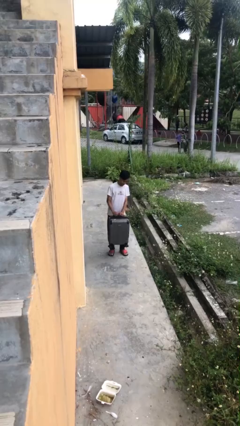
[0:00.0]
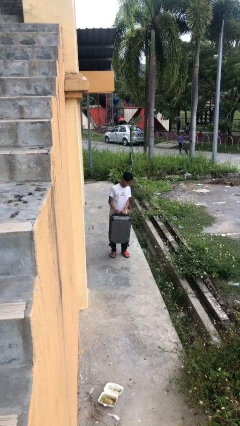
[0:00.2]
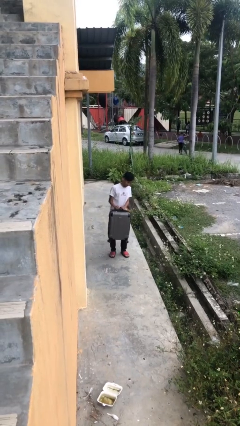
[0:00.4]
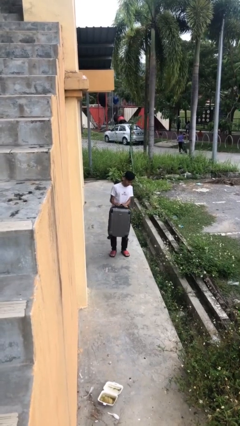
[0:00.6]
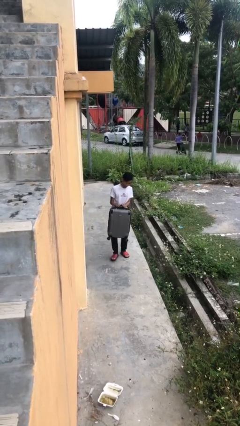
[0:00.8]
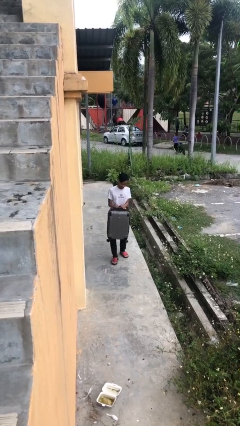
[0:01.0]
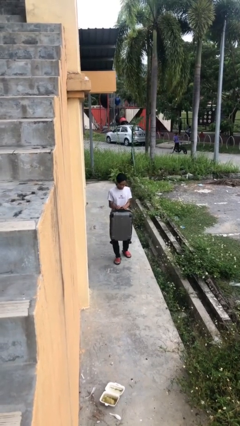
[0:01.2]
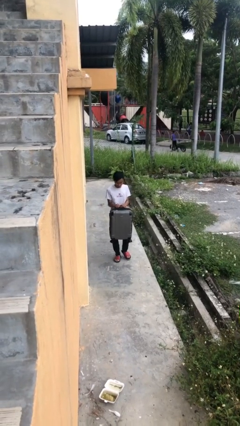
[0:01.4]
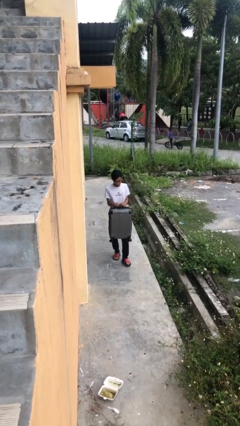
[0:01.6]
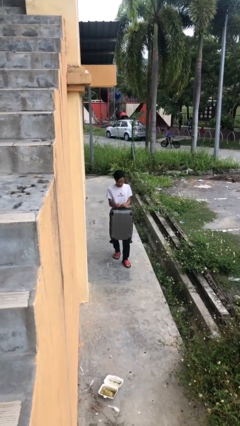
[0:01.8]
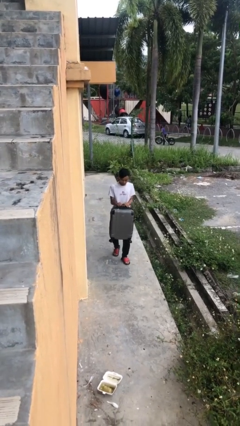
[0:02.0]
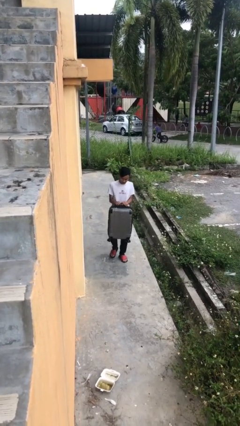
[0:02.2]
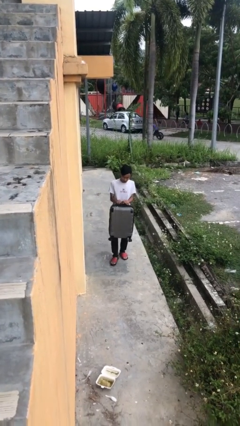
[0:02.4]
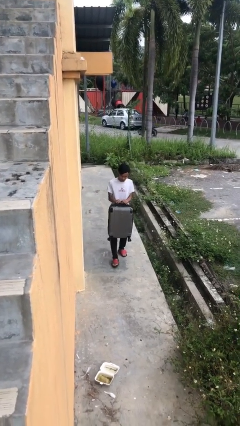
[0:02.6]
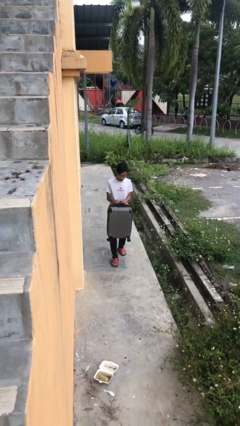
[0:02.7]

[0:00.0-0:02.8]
person carries heavy object

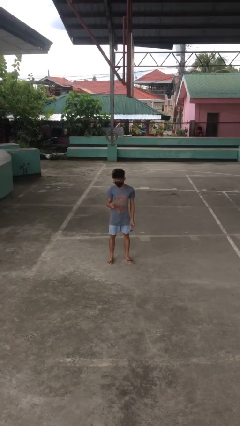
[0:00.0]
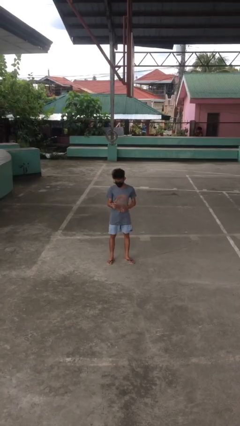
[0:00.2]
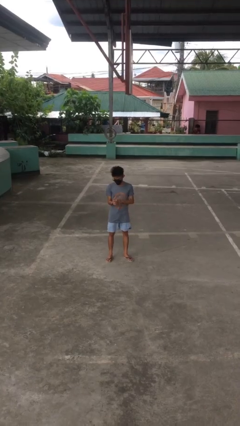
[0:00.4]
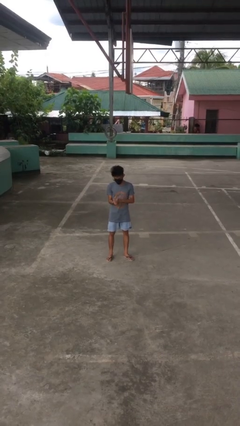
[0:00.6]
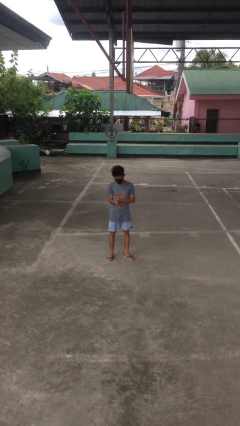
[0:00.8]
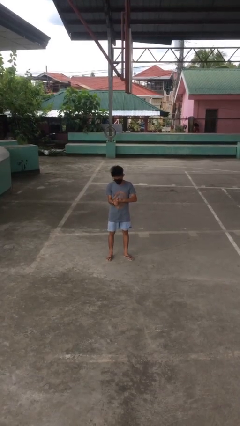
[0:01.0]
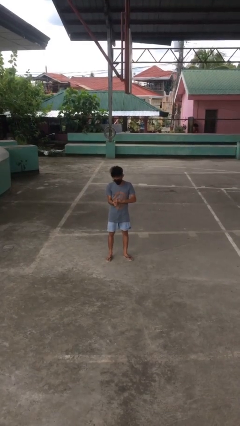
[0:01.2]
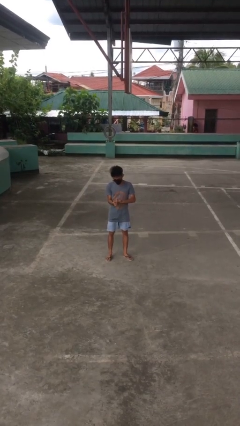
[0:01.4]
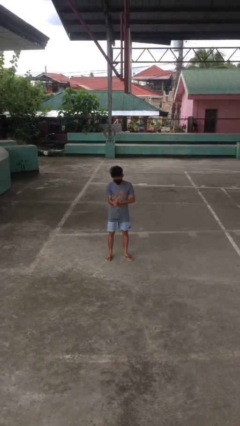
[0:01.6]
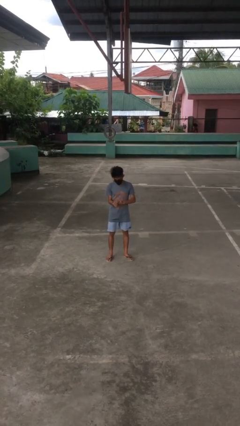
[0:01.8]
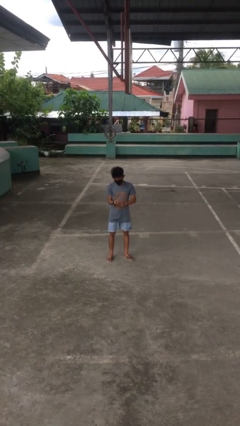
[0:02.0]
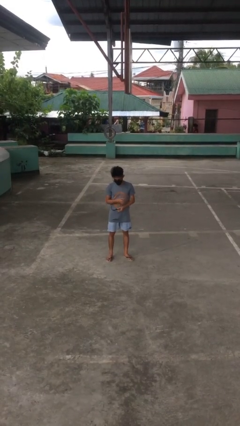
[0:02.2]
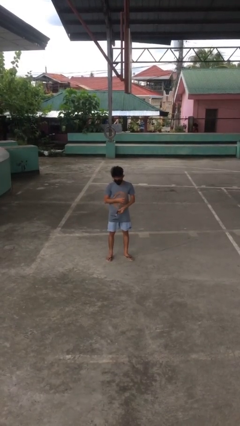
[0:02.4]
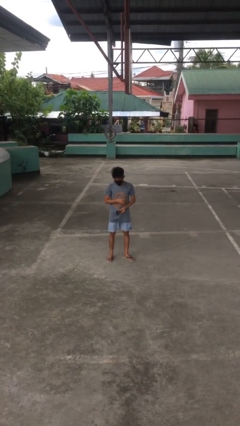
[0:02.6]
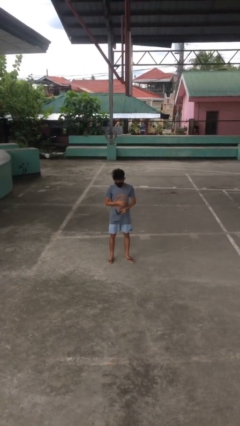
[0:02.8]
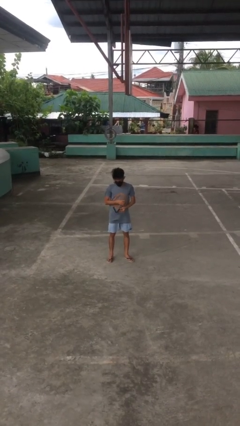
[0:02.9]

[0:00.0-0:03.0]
person takes off wristwatch

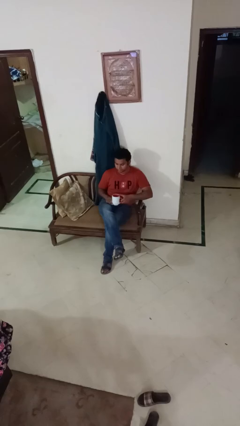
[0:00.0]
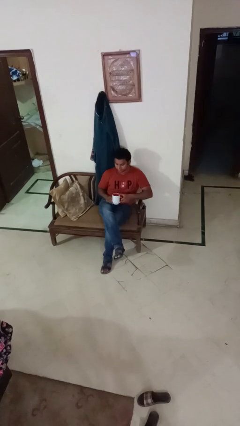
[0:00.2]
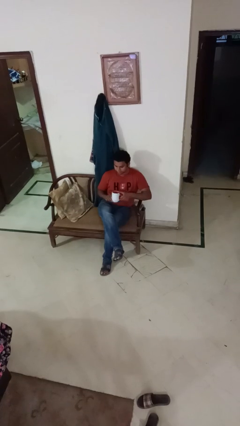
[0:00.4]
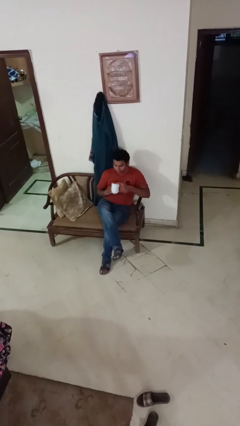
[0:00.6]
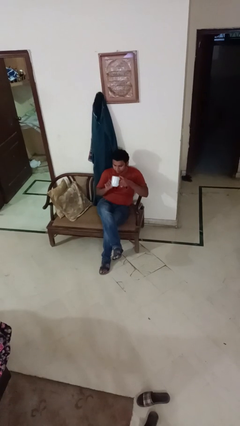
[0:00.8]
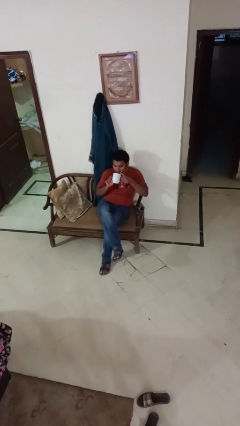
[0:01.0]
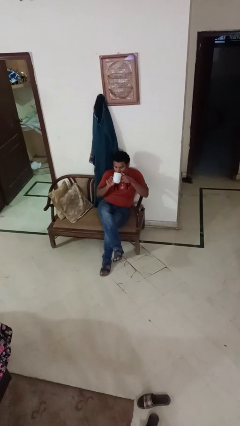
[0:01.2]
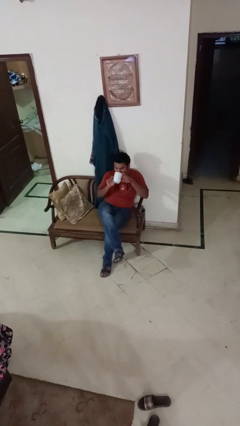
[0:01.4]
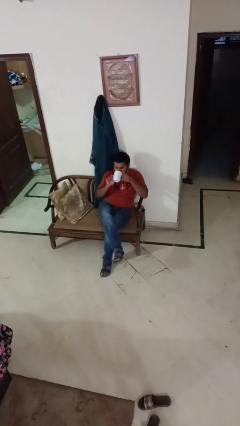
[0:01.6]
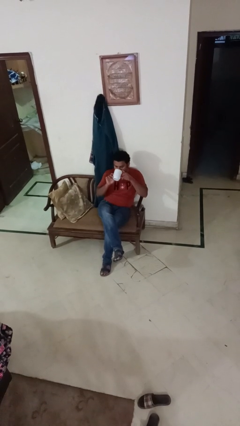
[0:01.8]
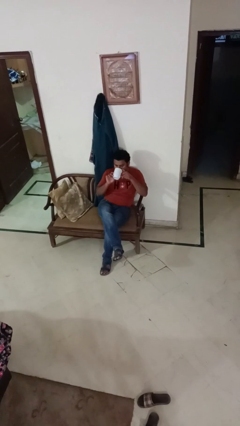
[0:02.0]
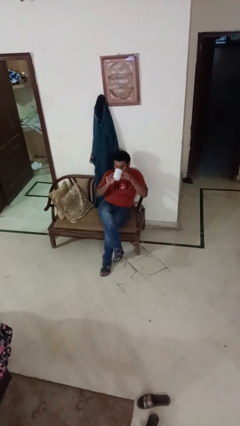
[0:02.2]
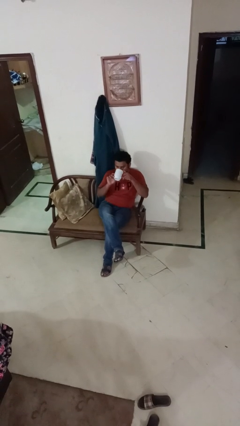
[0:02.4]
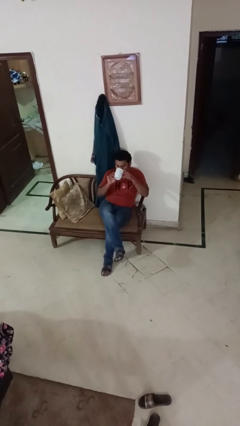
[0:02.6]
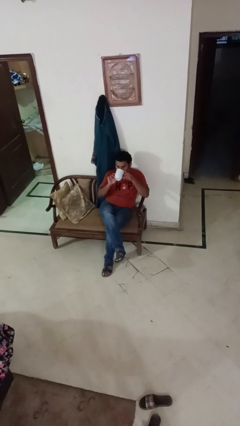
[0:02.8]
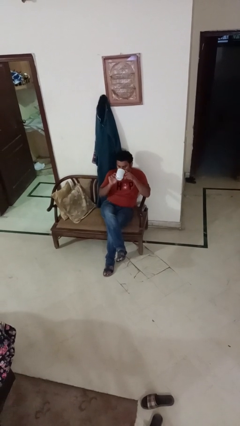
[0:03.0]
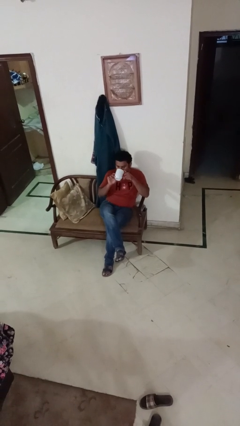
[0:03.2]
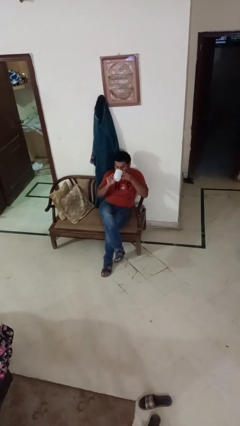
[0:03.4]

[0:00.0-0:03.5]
person drinks from mug

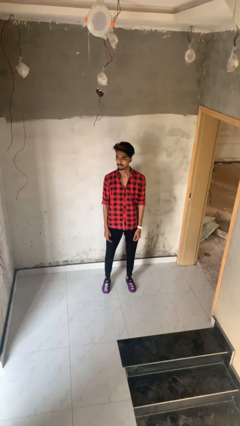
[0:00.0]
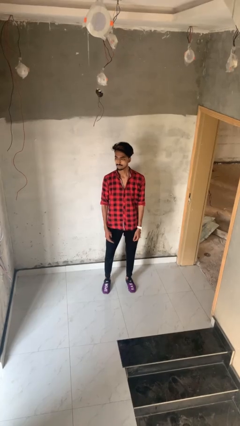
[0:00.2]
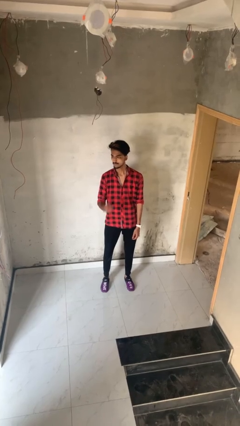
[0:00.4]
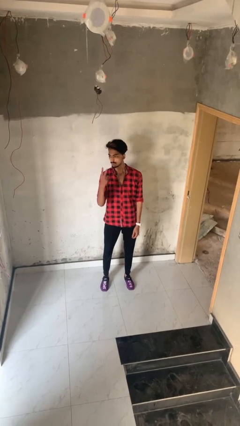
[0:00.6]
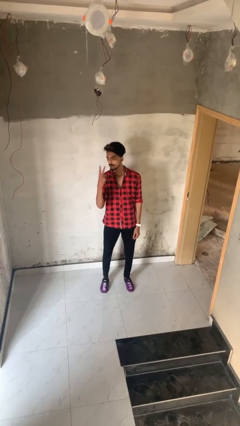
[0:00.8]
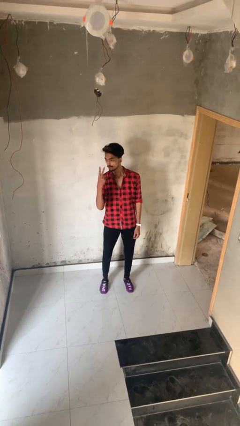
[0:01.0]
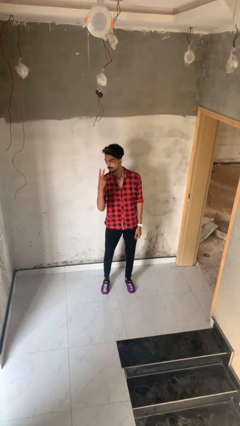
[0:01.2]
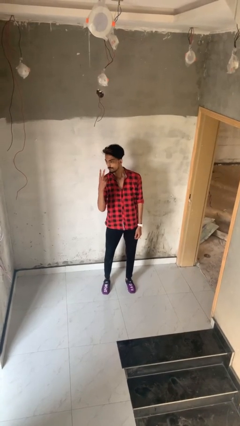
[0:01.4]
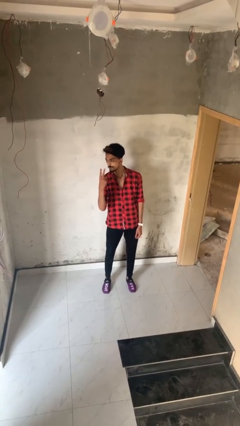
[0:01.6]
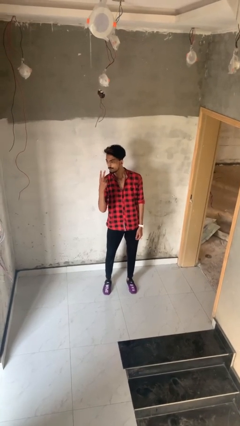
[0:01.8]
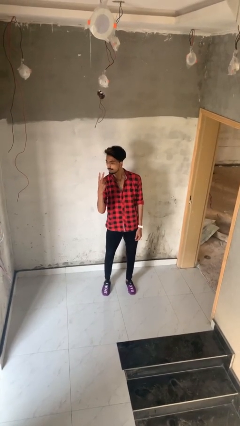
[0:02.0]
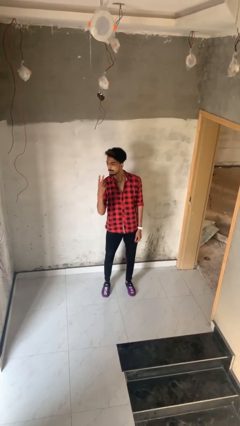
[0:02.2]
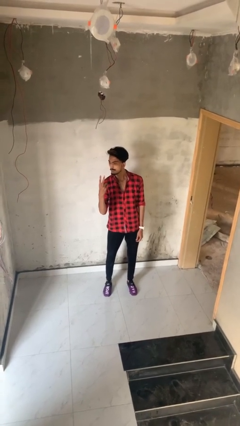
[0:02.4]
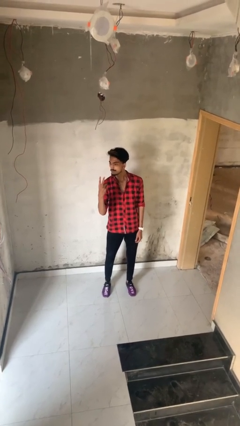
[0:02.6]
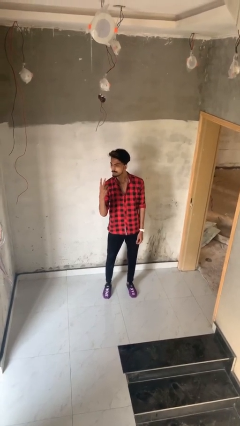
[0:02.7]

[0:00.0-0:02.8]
person gestures peace

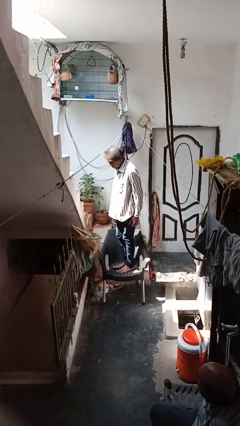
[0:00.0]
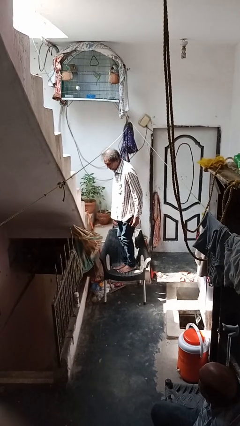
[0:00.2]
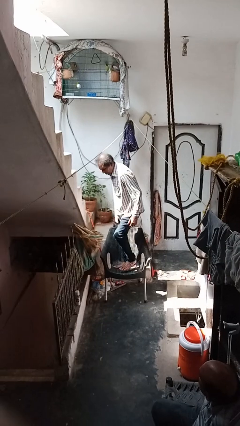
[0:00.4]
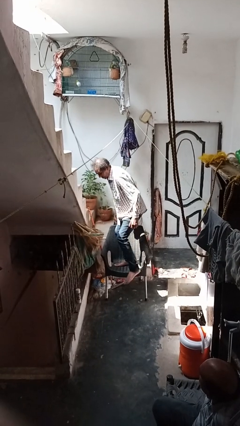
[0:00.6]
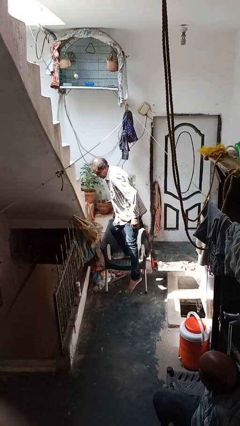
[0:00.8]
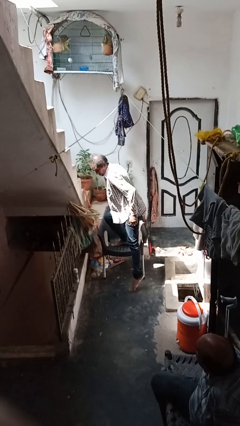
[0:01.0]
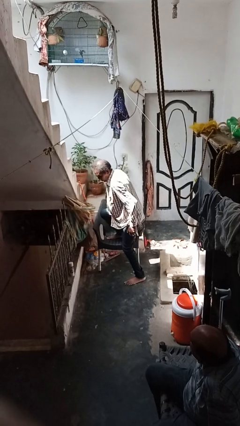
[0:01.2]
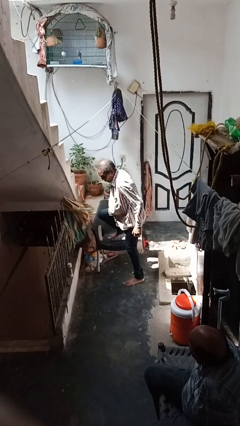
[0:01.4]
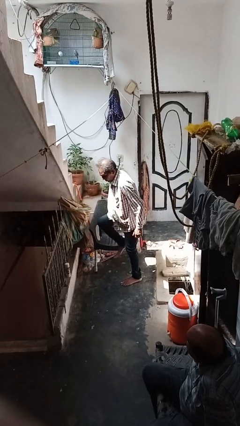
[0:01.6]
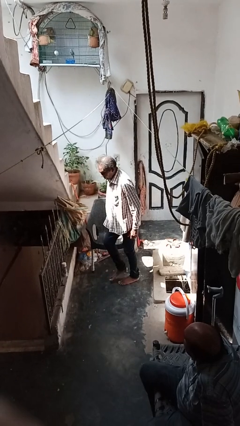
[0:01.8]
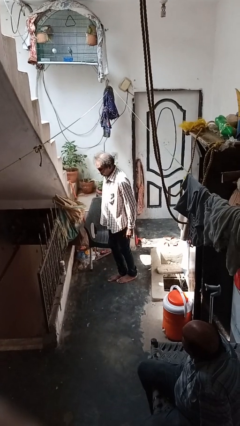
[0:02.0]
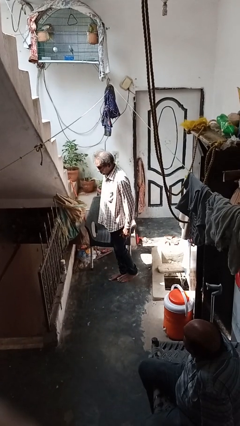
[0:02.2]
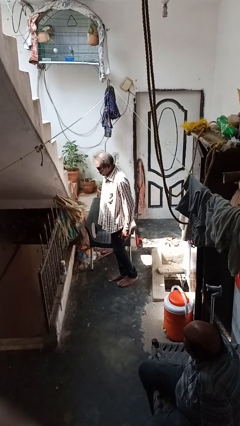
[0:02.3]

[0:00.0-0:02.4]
person climbs off chair

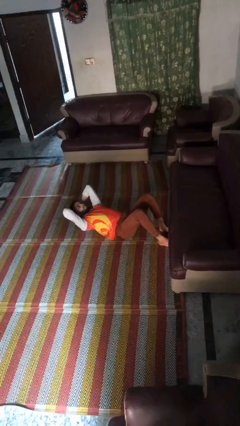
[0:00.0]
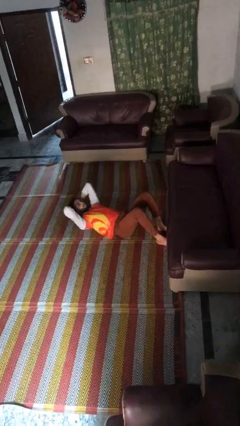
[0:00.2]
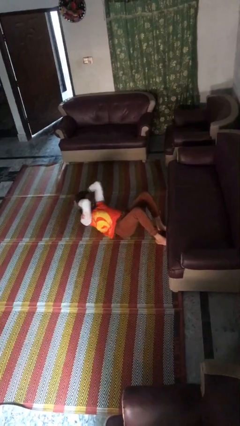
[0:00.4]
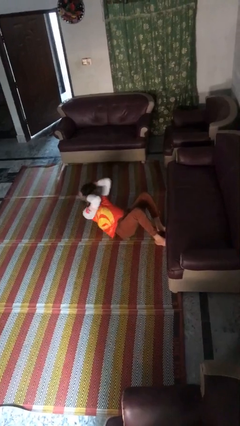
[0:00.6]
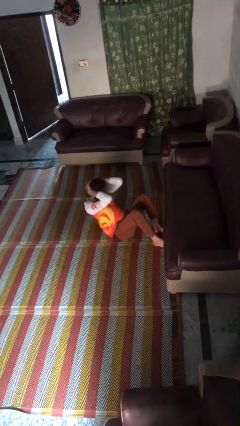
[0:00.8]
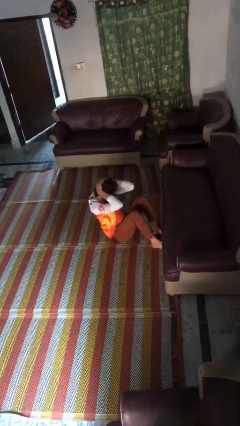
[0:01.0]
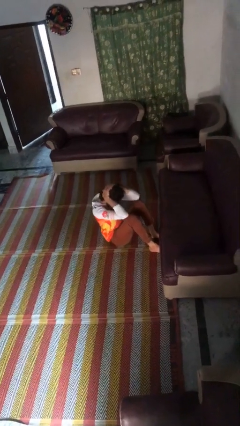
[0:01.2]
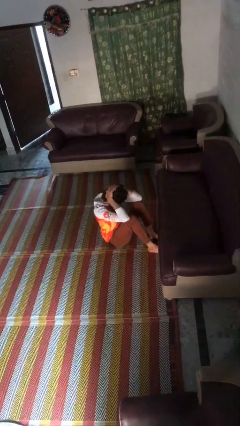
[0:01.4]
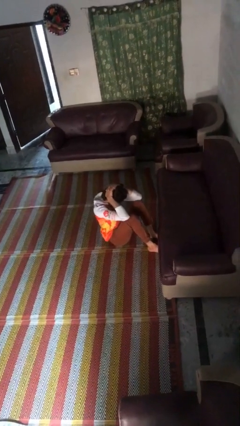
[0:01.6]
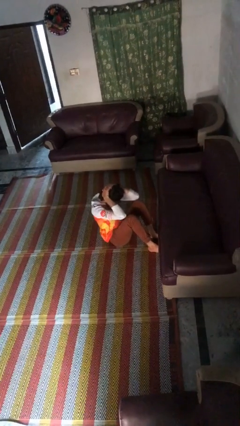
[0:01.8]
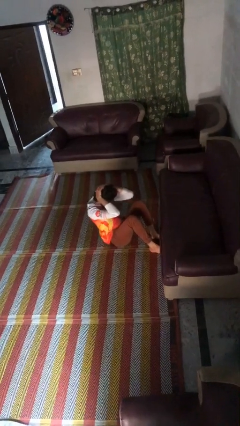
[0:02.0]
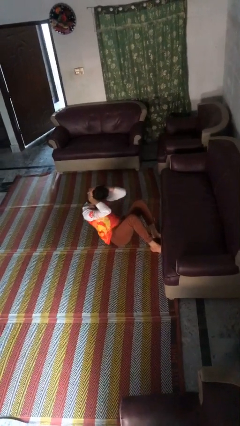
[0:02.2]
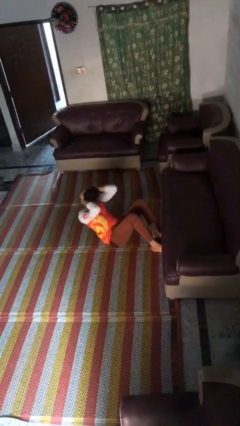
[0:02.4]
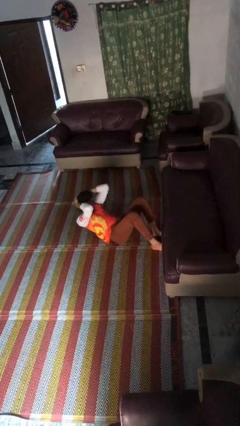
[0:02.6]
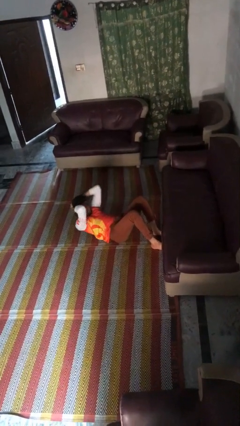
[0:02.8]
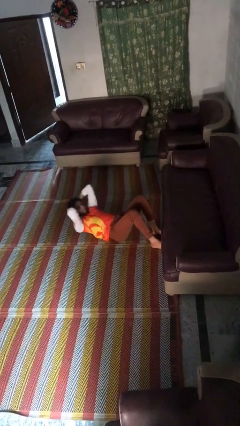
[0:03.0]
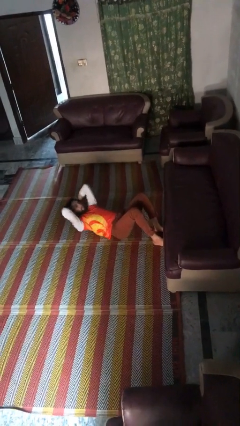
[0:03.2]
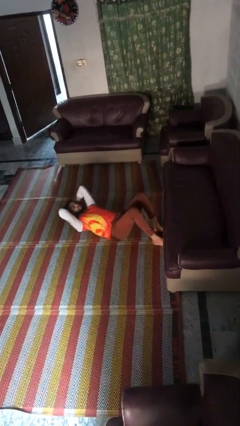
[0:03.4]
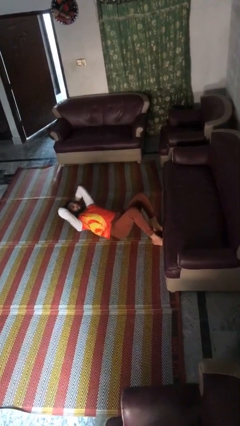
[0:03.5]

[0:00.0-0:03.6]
person exercises with situp
